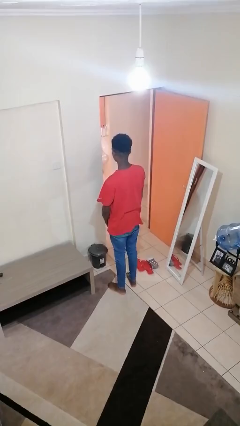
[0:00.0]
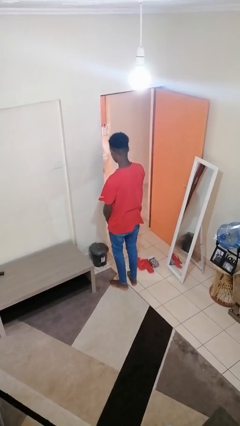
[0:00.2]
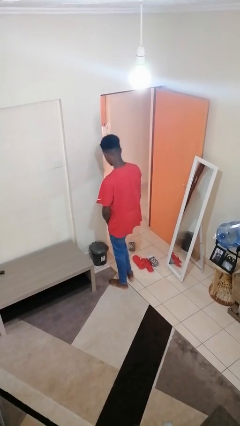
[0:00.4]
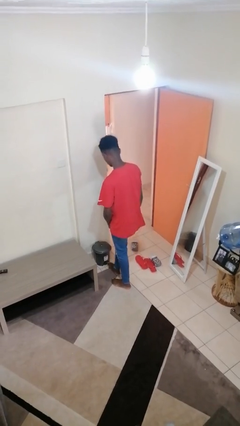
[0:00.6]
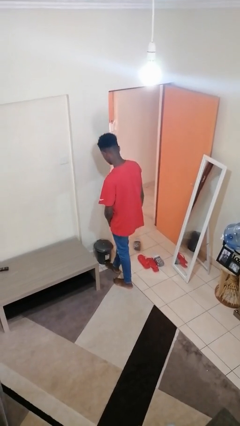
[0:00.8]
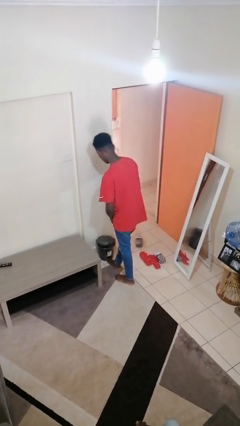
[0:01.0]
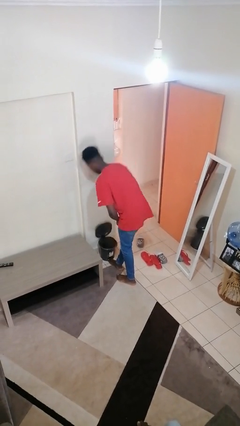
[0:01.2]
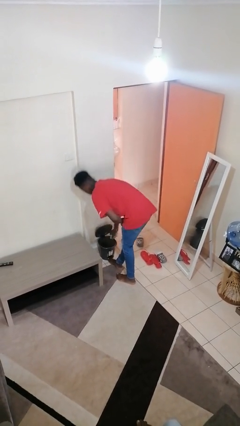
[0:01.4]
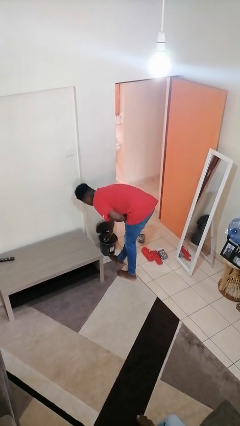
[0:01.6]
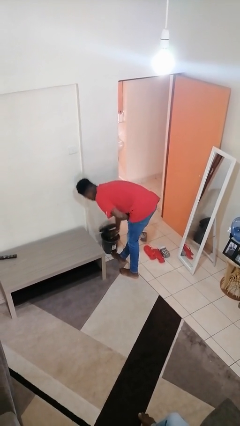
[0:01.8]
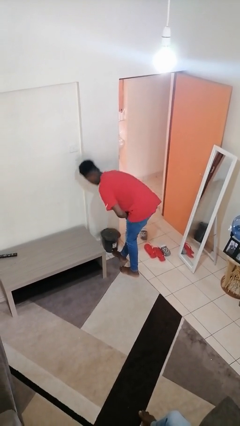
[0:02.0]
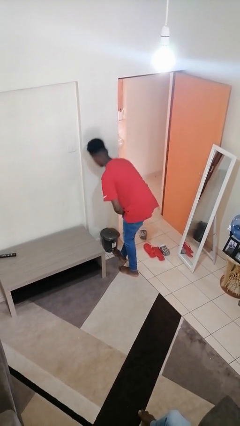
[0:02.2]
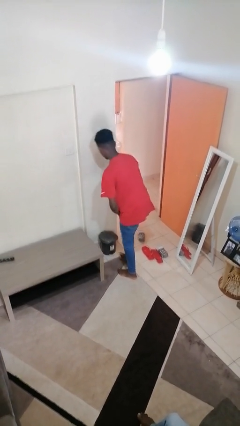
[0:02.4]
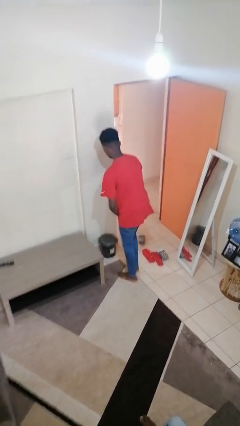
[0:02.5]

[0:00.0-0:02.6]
person discards trash

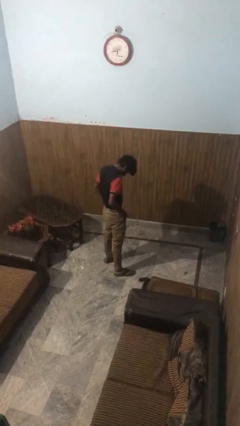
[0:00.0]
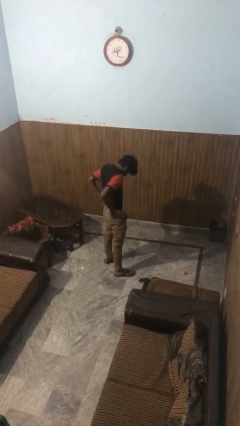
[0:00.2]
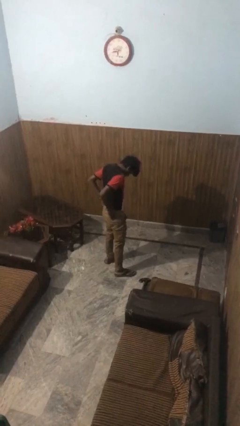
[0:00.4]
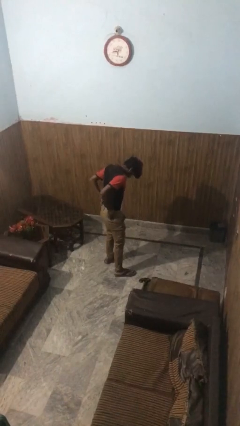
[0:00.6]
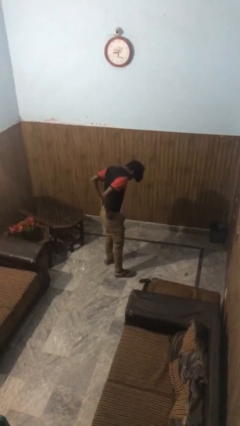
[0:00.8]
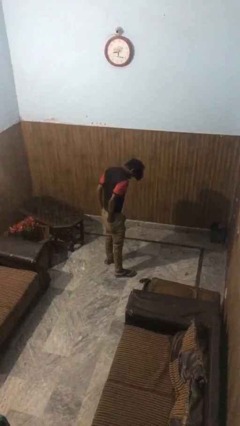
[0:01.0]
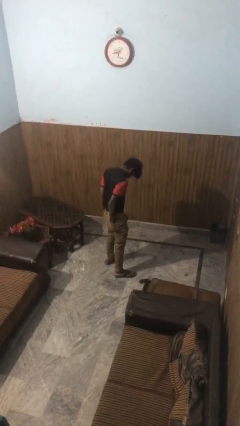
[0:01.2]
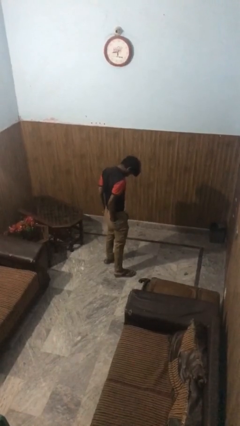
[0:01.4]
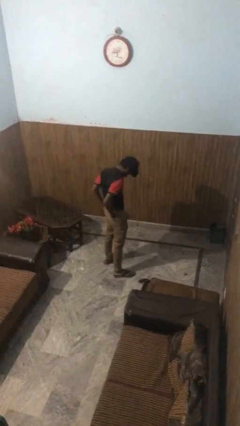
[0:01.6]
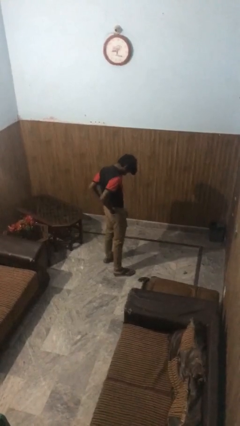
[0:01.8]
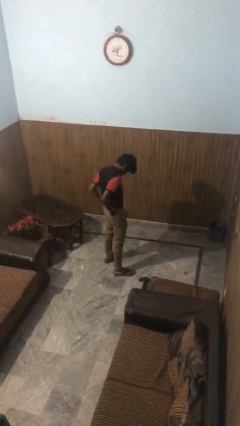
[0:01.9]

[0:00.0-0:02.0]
person puts hands in back pockets

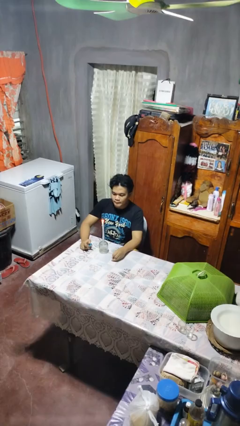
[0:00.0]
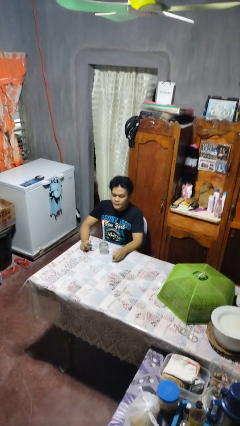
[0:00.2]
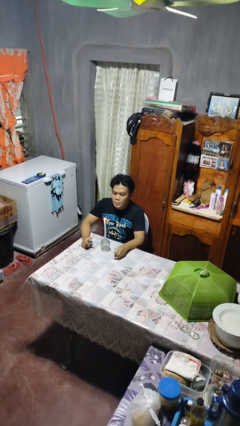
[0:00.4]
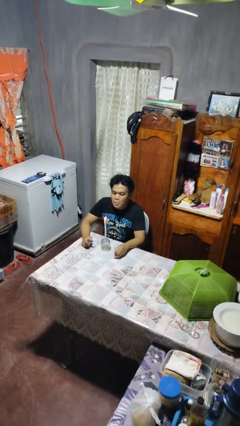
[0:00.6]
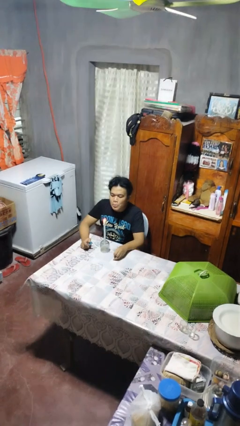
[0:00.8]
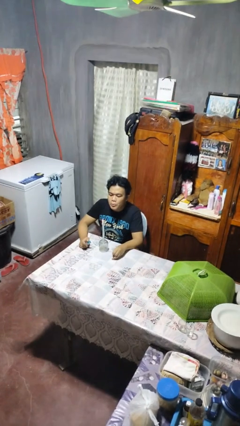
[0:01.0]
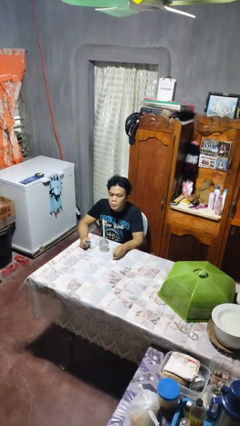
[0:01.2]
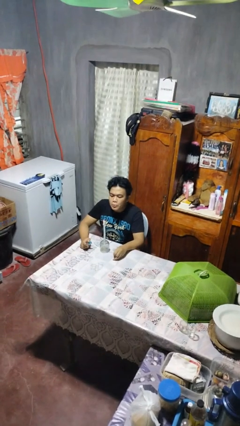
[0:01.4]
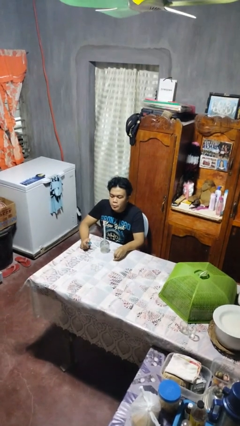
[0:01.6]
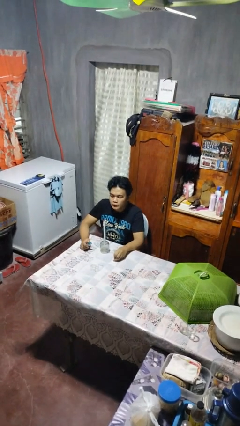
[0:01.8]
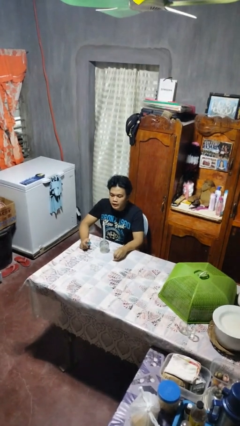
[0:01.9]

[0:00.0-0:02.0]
person extinguishes candle

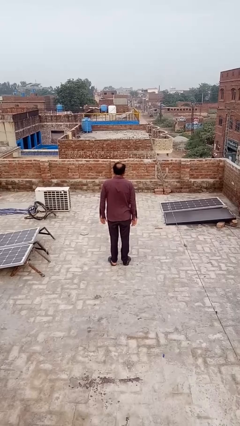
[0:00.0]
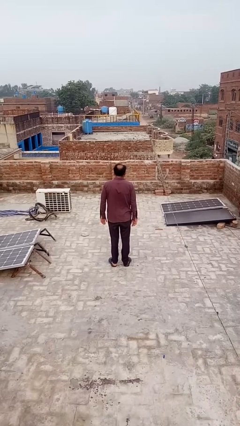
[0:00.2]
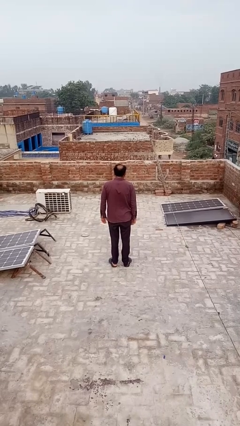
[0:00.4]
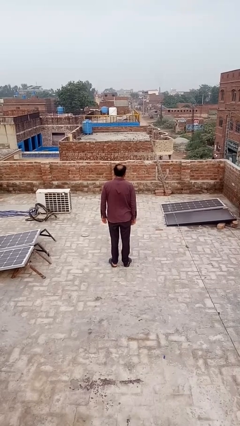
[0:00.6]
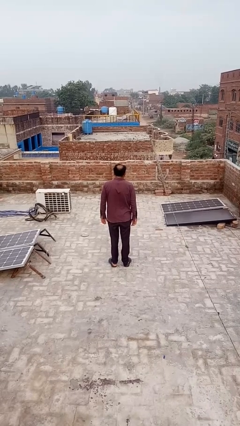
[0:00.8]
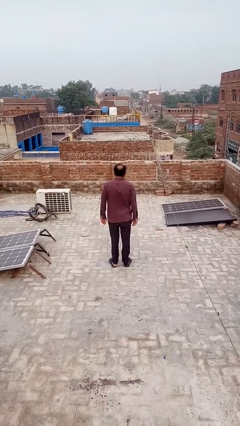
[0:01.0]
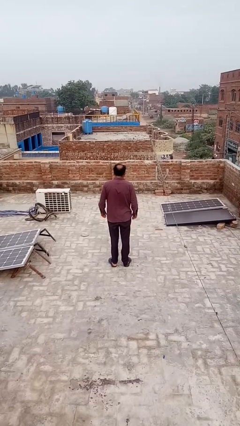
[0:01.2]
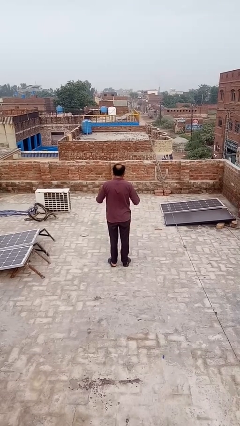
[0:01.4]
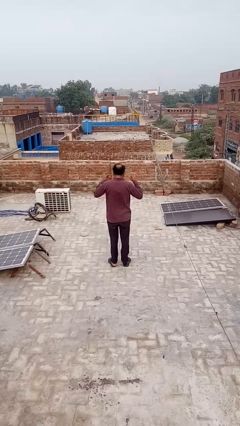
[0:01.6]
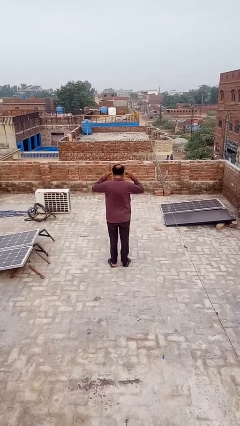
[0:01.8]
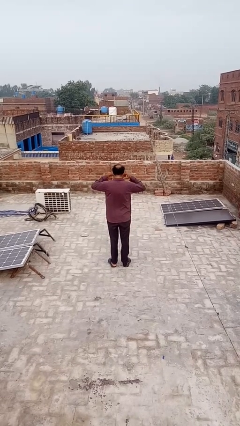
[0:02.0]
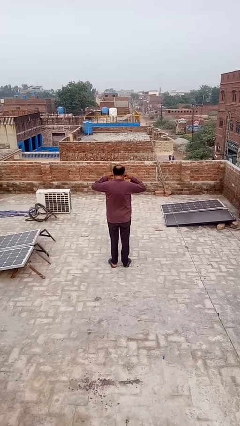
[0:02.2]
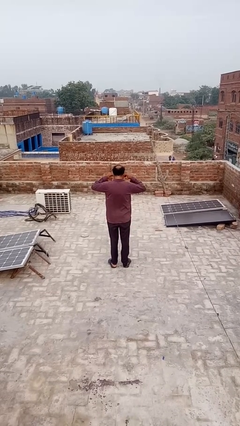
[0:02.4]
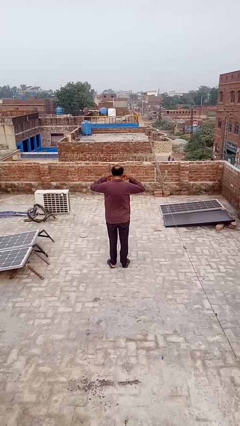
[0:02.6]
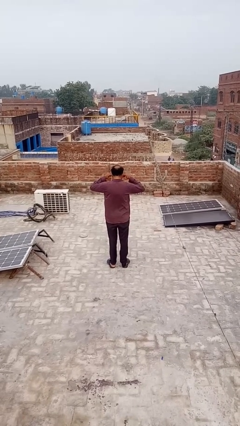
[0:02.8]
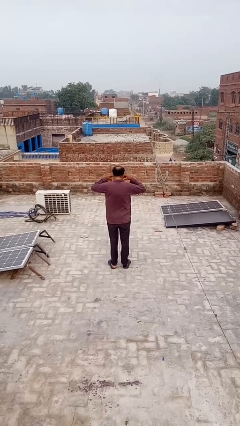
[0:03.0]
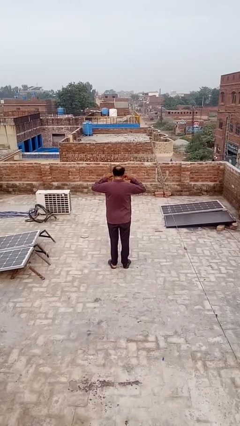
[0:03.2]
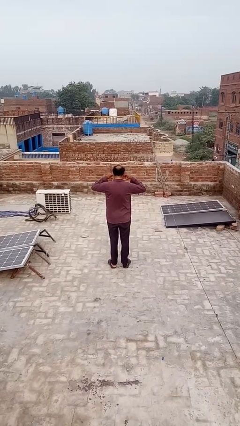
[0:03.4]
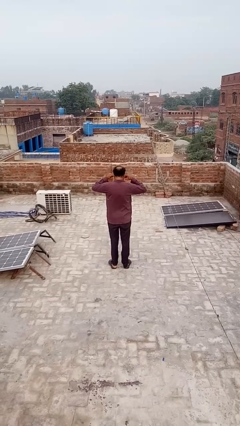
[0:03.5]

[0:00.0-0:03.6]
person puts fingers in ear

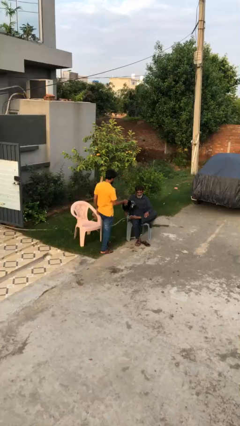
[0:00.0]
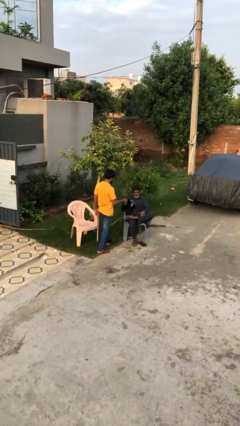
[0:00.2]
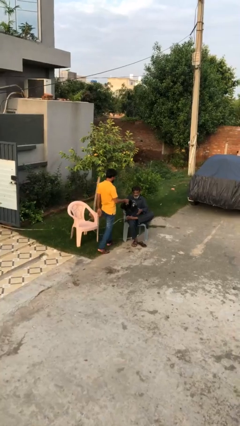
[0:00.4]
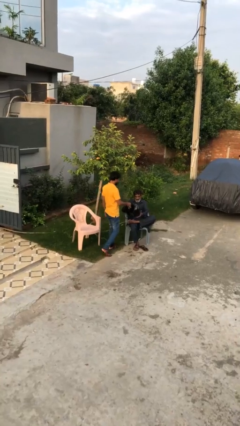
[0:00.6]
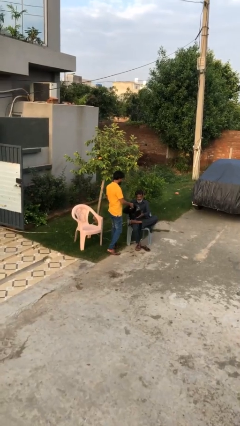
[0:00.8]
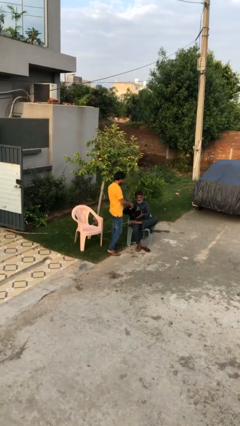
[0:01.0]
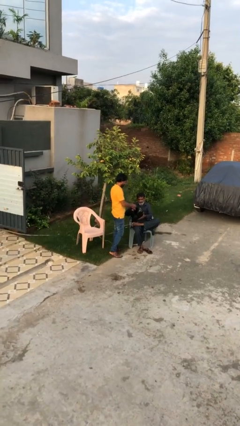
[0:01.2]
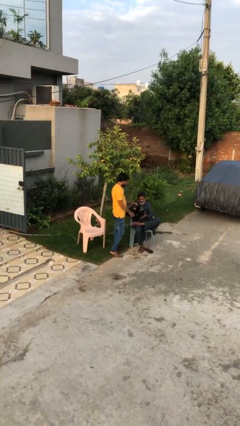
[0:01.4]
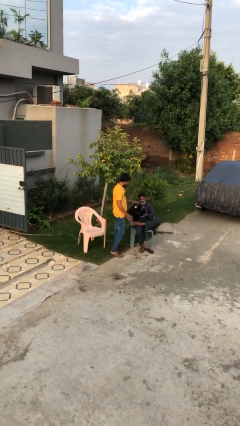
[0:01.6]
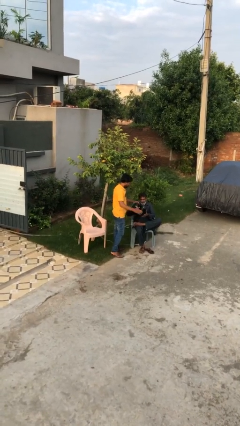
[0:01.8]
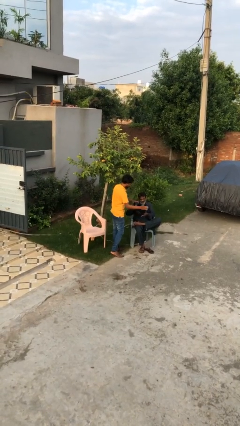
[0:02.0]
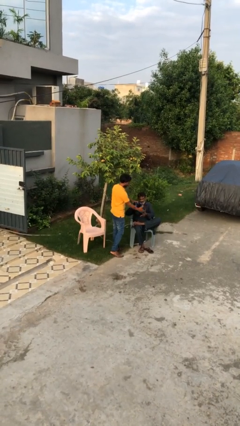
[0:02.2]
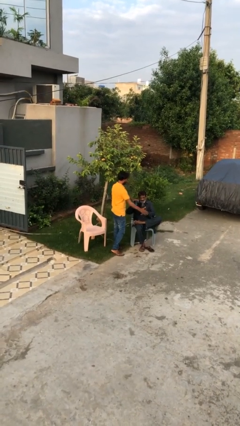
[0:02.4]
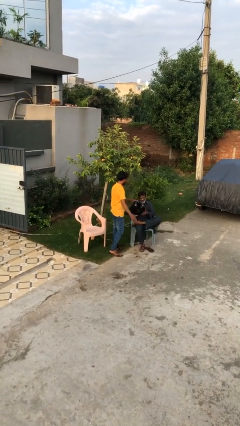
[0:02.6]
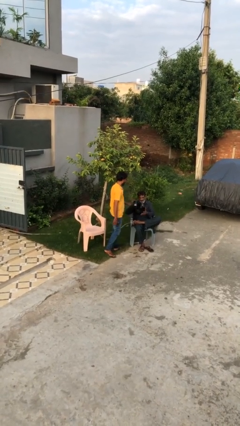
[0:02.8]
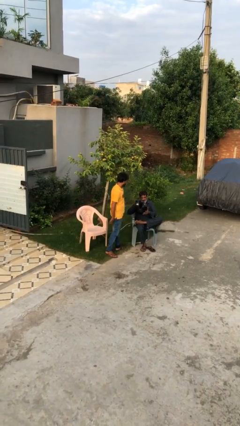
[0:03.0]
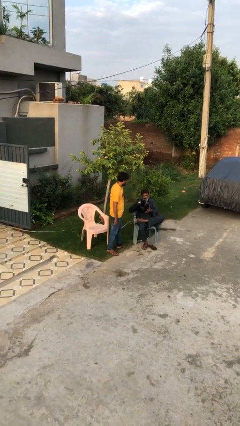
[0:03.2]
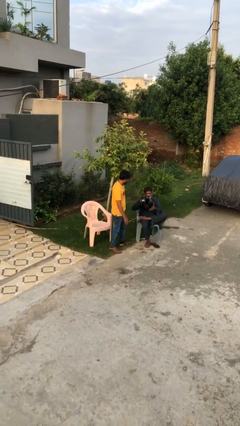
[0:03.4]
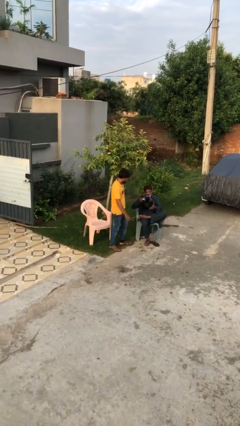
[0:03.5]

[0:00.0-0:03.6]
person transfers object to person

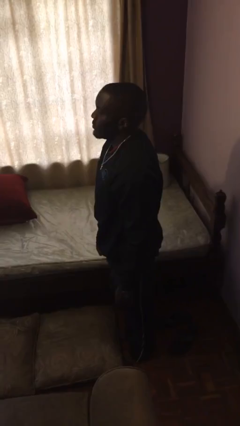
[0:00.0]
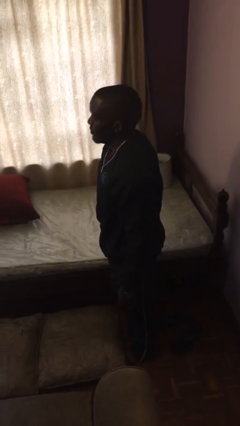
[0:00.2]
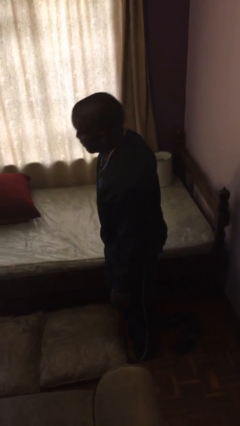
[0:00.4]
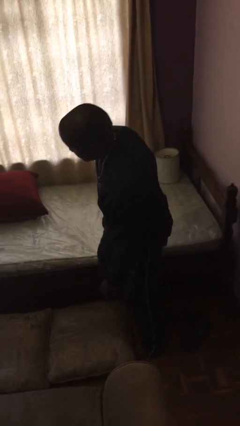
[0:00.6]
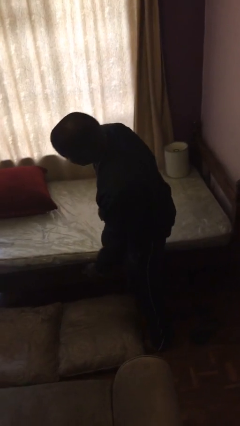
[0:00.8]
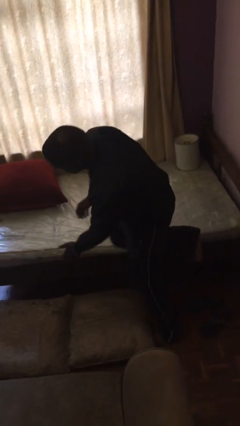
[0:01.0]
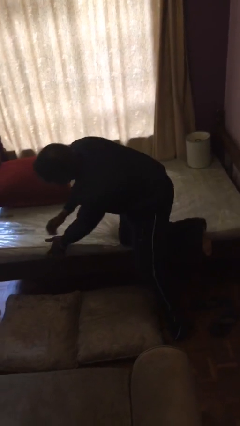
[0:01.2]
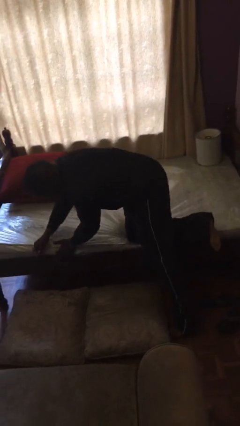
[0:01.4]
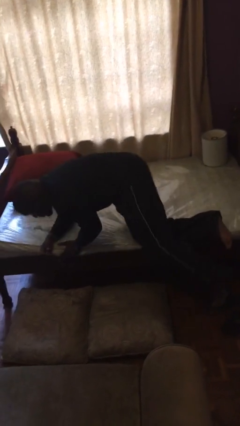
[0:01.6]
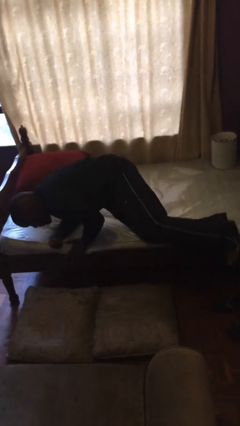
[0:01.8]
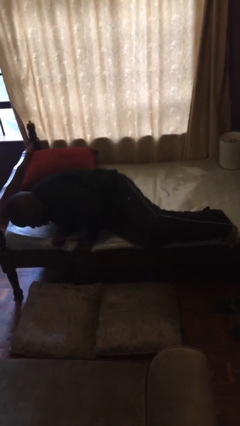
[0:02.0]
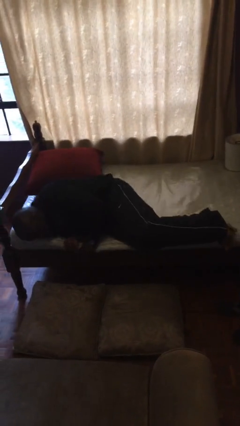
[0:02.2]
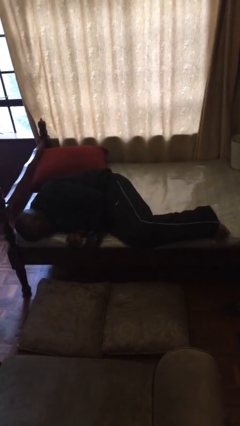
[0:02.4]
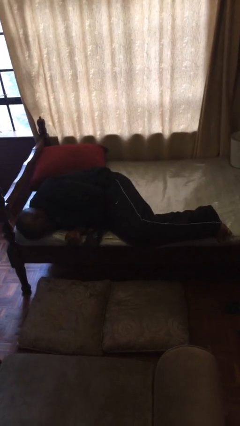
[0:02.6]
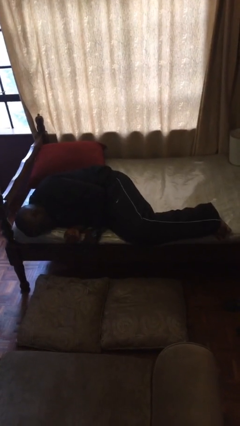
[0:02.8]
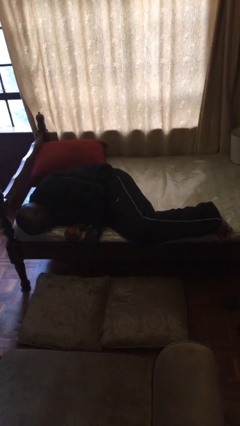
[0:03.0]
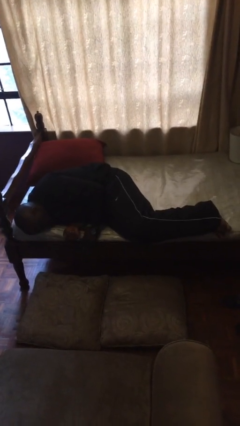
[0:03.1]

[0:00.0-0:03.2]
person lies down on bed

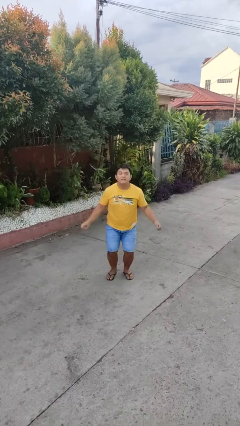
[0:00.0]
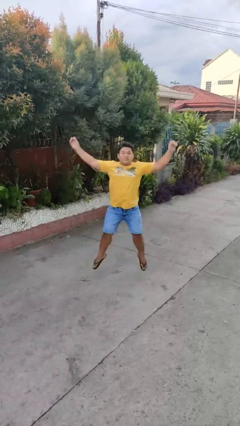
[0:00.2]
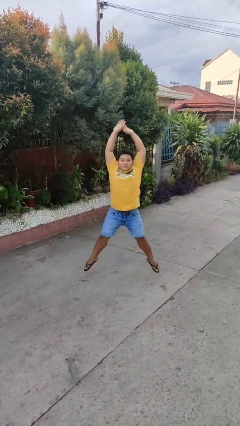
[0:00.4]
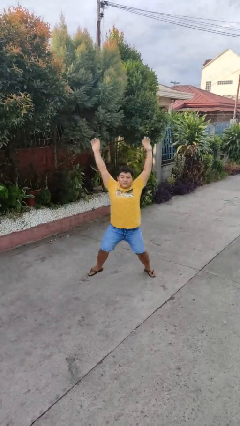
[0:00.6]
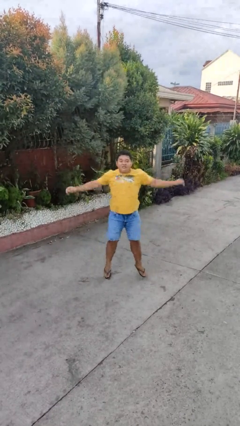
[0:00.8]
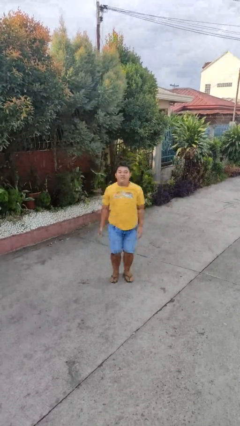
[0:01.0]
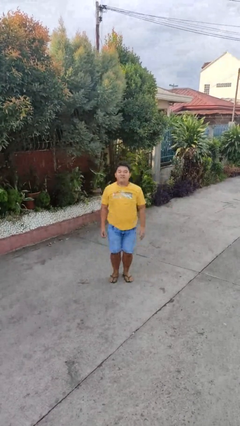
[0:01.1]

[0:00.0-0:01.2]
person exercises with jumping jacks
